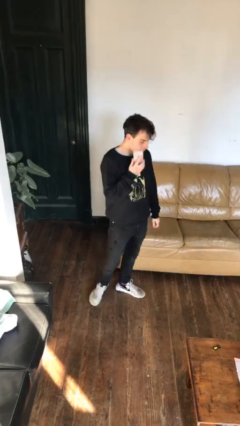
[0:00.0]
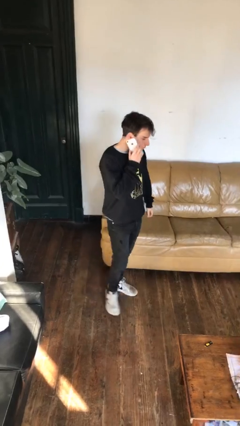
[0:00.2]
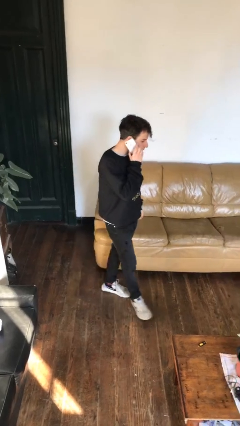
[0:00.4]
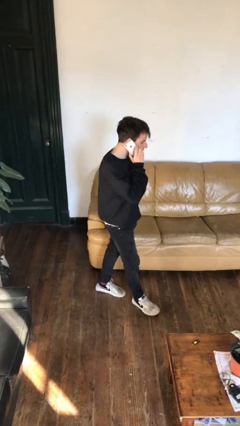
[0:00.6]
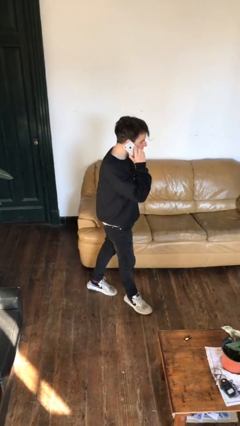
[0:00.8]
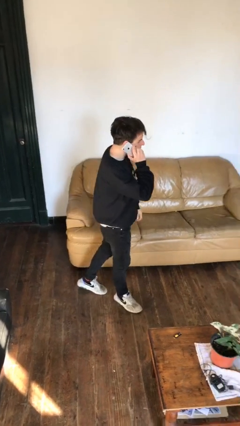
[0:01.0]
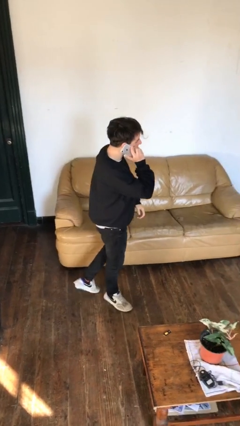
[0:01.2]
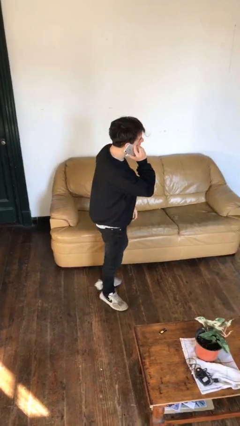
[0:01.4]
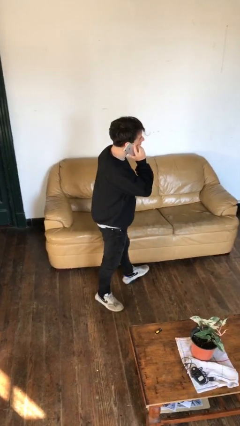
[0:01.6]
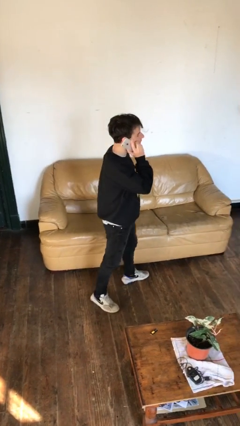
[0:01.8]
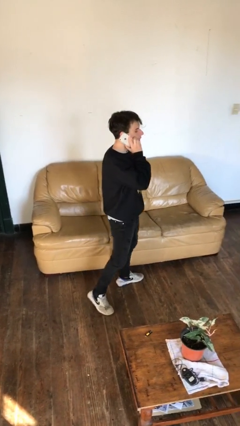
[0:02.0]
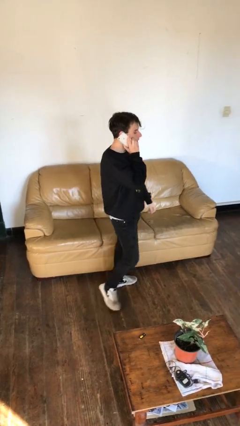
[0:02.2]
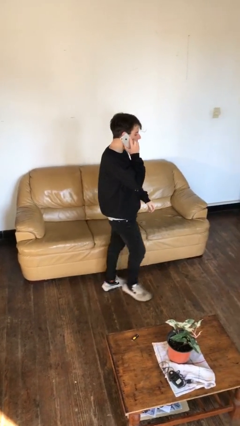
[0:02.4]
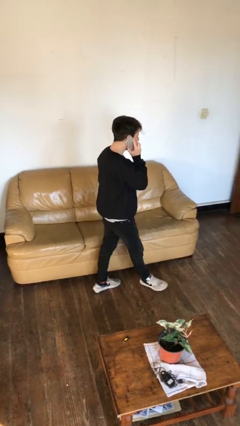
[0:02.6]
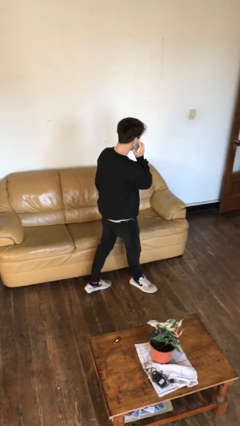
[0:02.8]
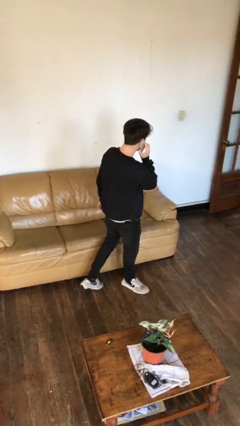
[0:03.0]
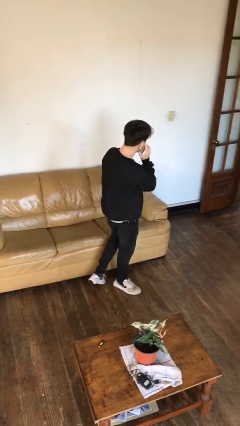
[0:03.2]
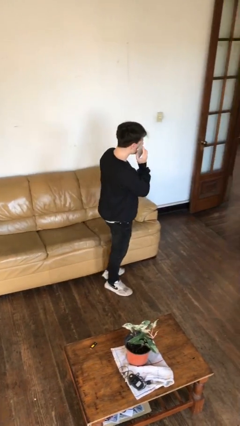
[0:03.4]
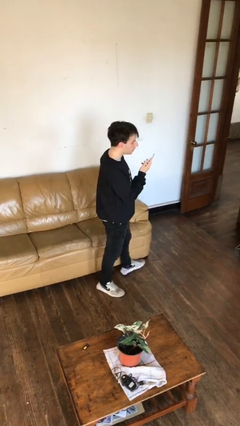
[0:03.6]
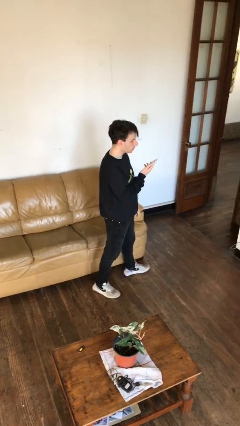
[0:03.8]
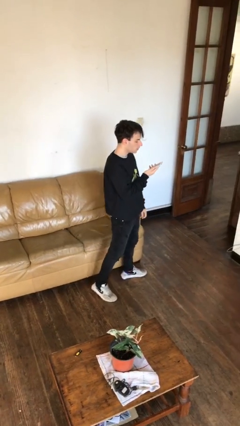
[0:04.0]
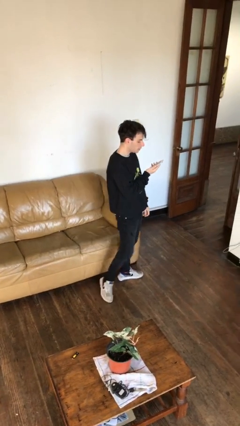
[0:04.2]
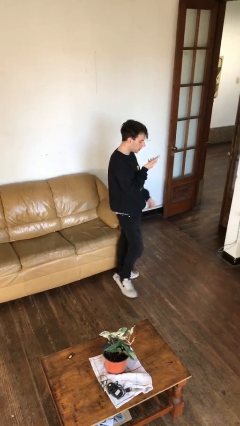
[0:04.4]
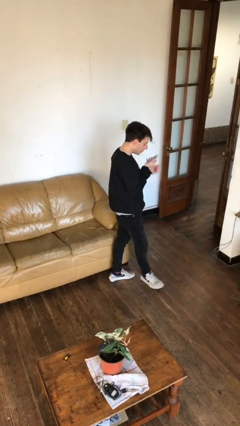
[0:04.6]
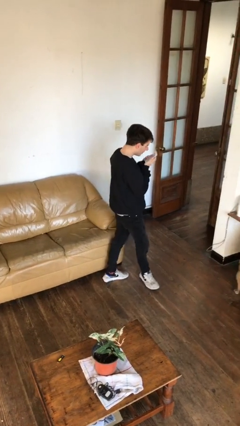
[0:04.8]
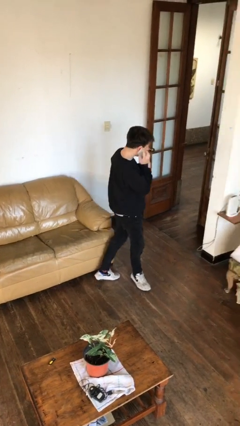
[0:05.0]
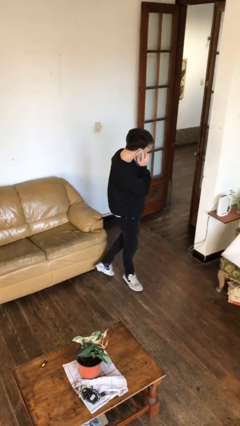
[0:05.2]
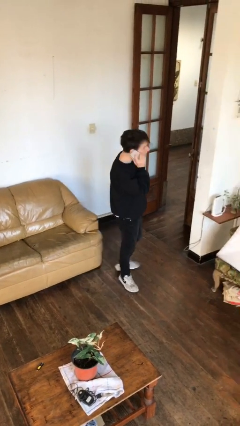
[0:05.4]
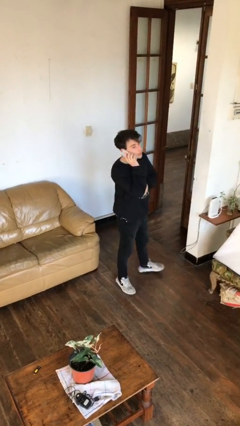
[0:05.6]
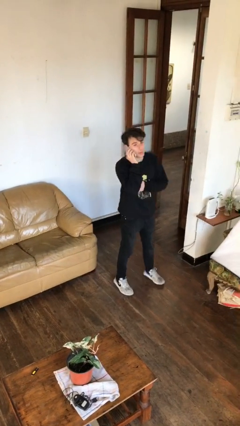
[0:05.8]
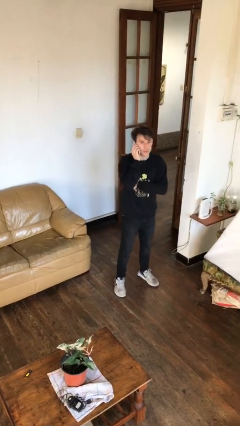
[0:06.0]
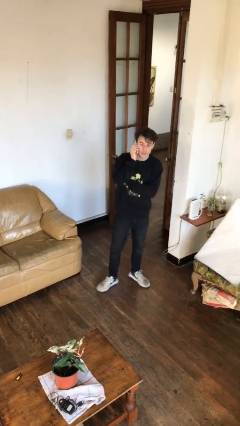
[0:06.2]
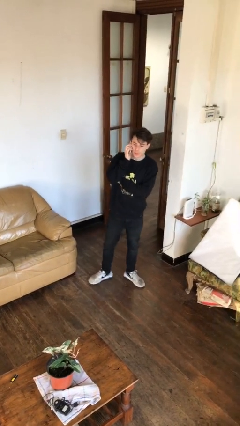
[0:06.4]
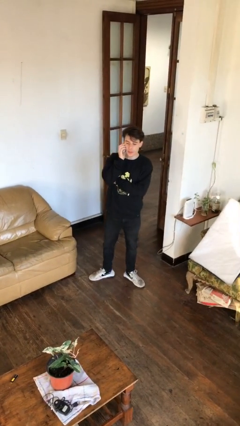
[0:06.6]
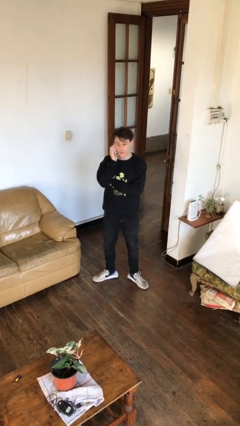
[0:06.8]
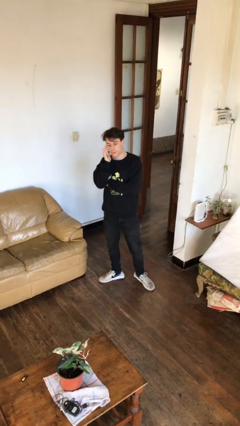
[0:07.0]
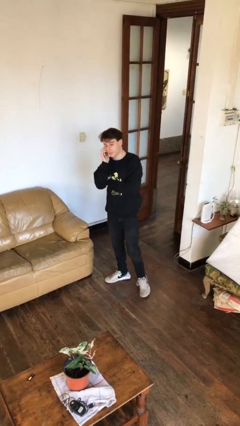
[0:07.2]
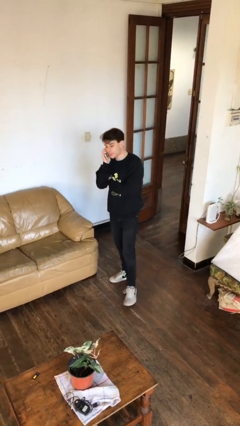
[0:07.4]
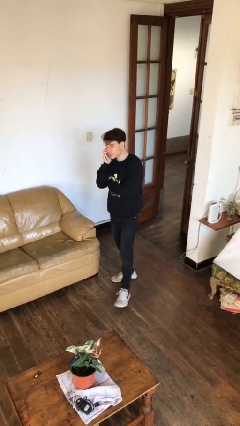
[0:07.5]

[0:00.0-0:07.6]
person talks on phone

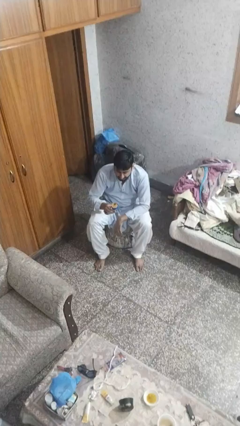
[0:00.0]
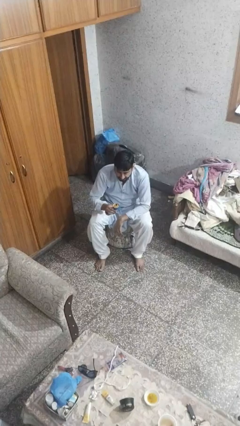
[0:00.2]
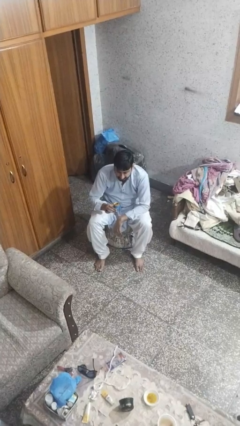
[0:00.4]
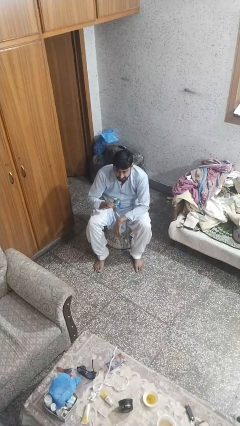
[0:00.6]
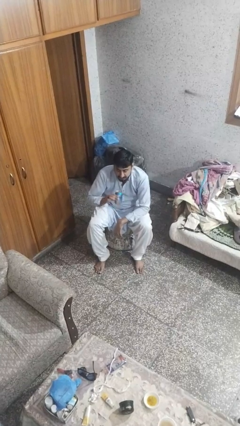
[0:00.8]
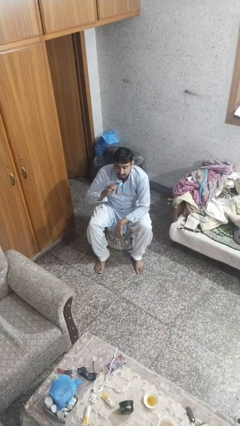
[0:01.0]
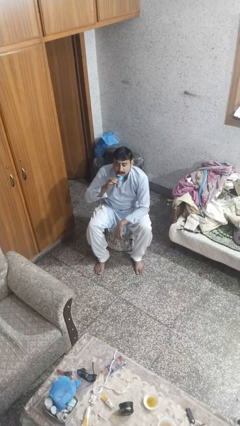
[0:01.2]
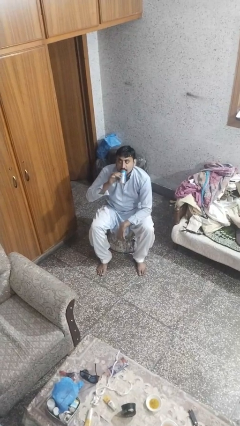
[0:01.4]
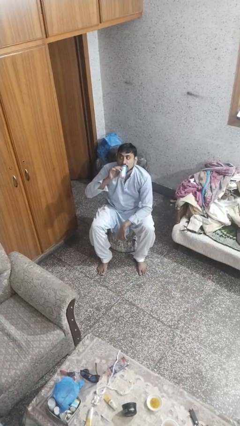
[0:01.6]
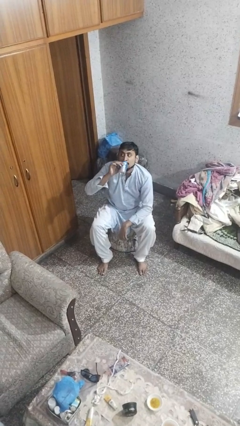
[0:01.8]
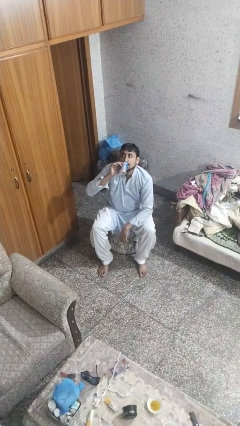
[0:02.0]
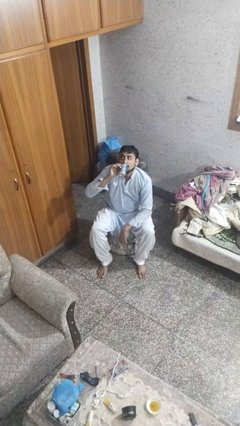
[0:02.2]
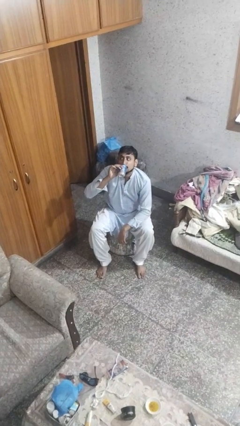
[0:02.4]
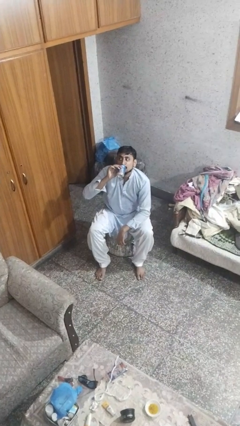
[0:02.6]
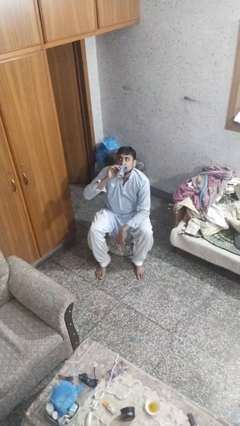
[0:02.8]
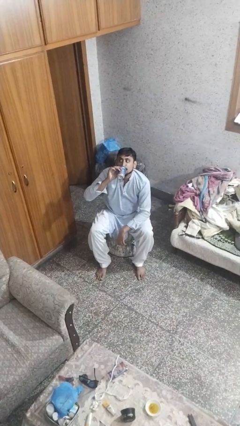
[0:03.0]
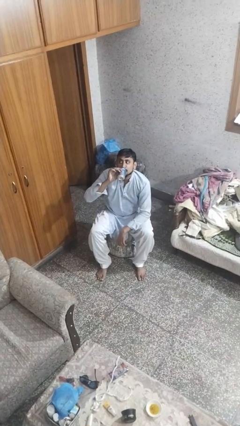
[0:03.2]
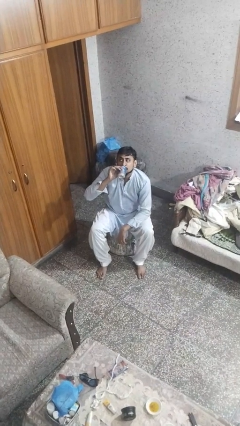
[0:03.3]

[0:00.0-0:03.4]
person drinks from beverage can

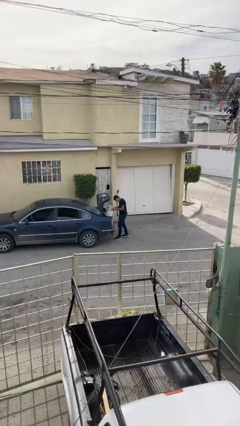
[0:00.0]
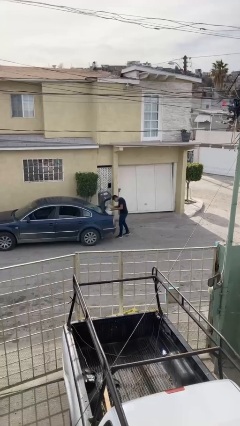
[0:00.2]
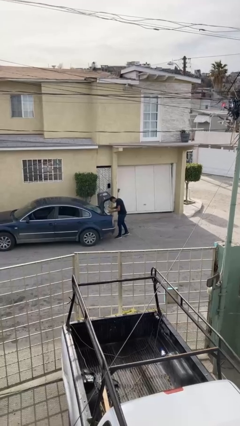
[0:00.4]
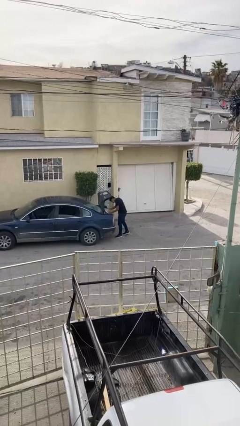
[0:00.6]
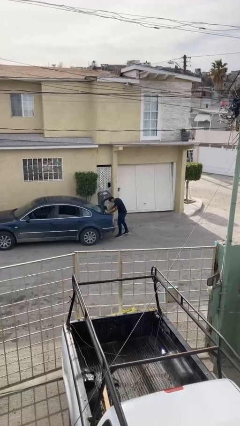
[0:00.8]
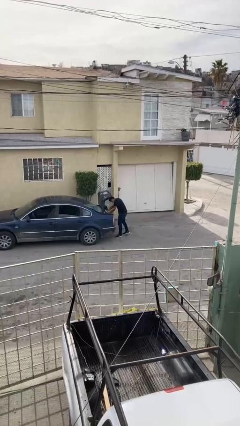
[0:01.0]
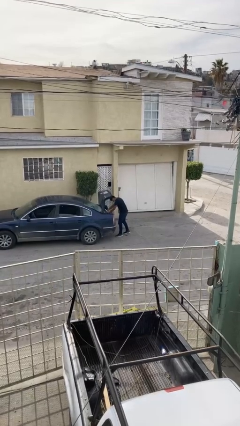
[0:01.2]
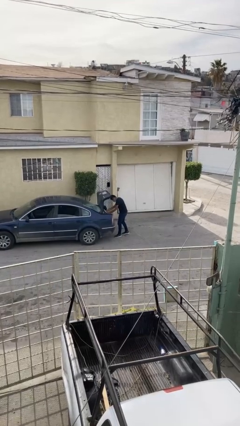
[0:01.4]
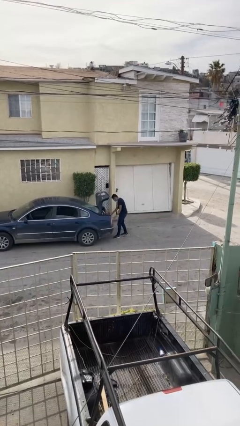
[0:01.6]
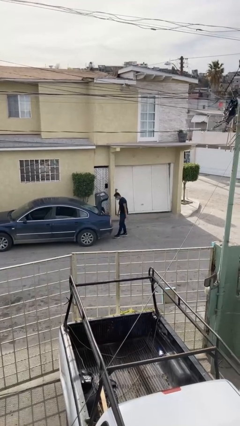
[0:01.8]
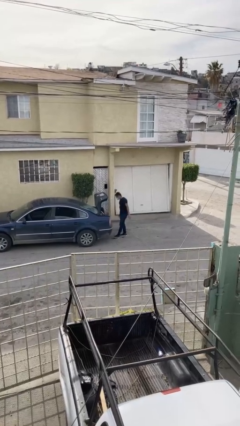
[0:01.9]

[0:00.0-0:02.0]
person loads car

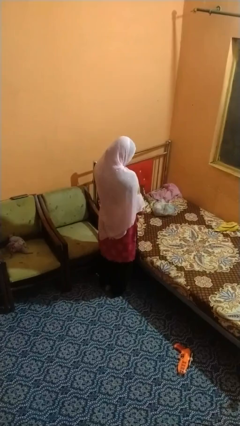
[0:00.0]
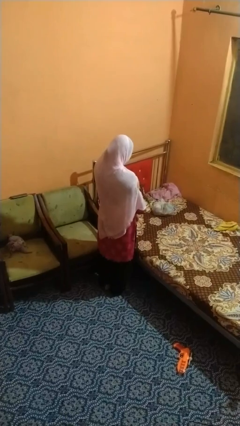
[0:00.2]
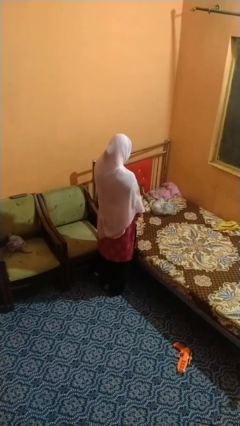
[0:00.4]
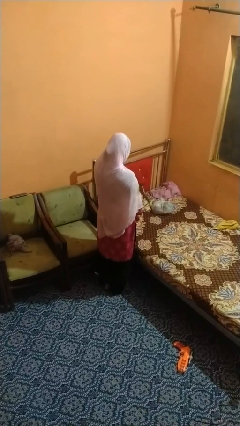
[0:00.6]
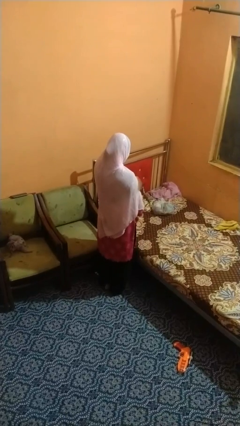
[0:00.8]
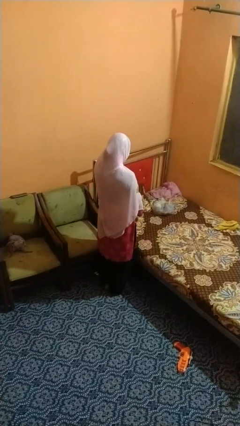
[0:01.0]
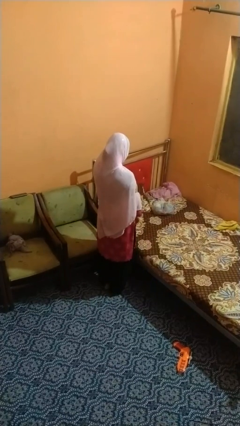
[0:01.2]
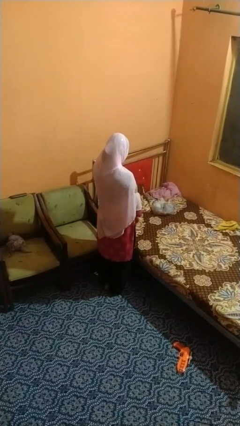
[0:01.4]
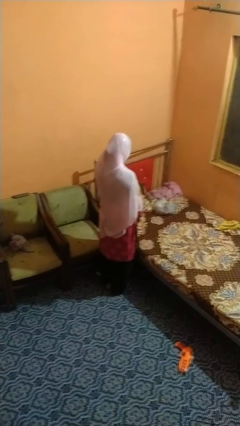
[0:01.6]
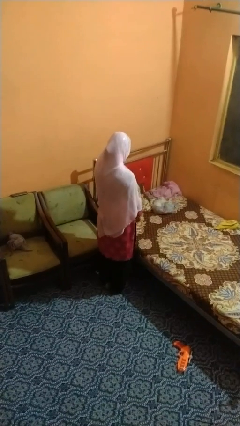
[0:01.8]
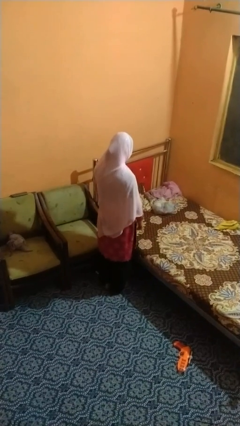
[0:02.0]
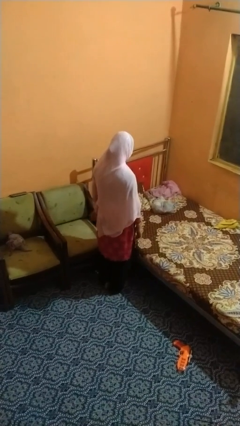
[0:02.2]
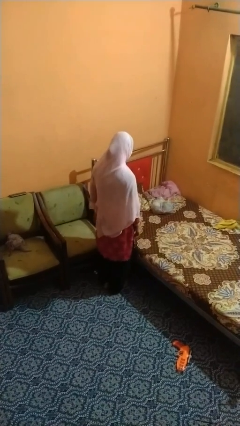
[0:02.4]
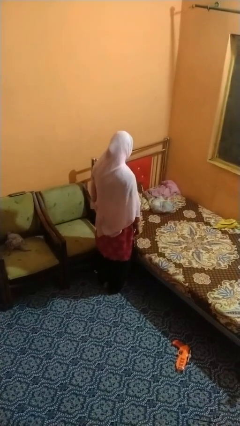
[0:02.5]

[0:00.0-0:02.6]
person swats bug

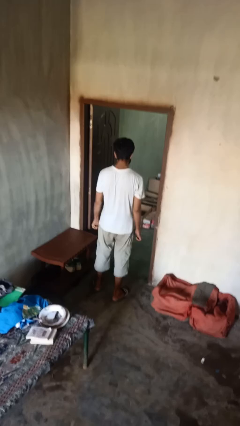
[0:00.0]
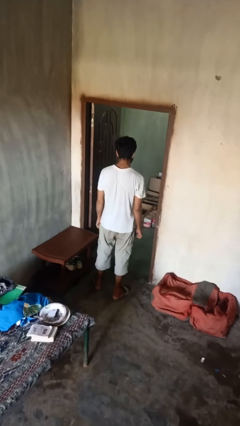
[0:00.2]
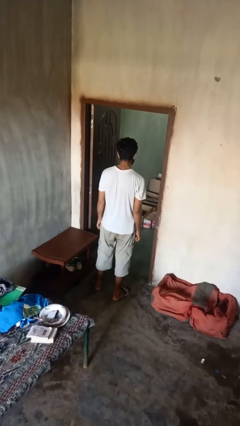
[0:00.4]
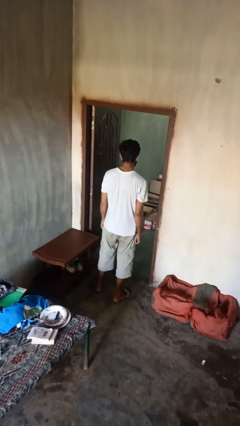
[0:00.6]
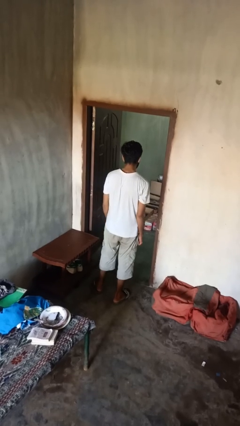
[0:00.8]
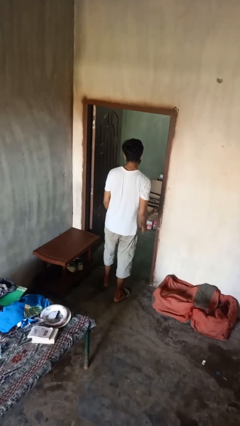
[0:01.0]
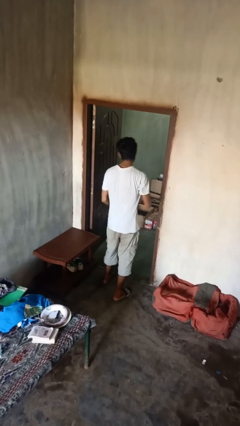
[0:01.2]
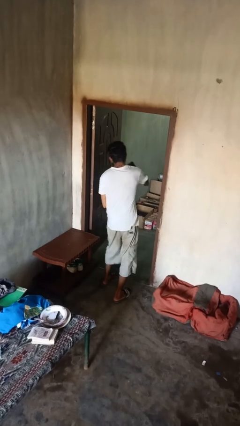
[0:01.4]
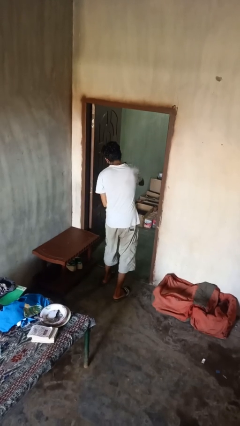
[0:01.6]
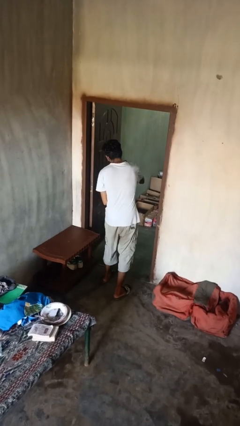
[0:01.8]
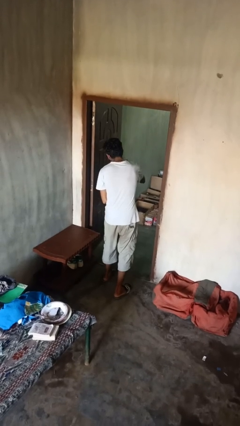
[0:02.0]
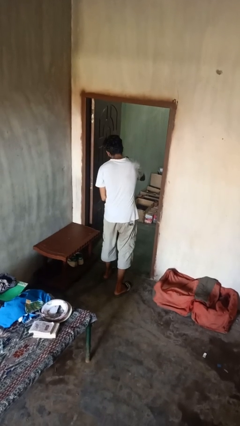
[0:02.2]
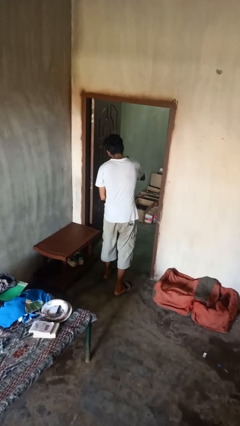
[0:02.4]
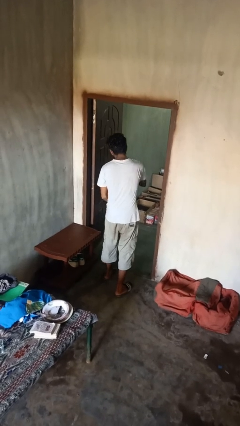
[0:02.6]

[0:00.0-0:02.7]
person punches
